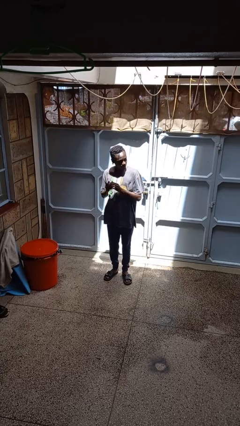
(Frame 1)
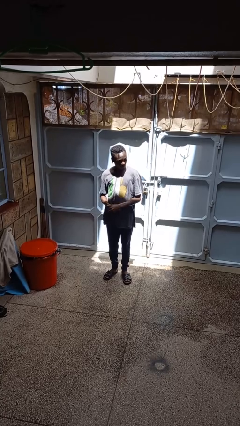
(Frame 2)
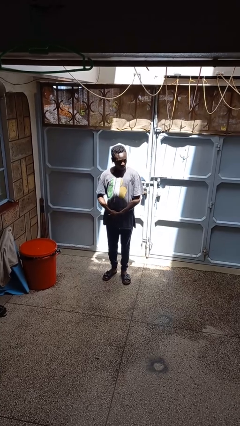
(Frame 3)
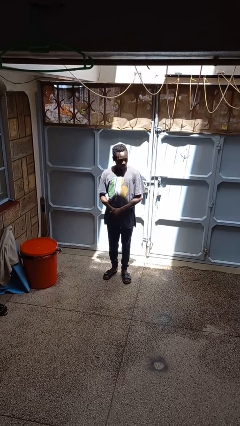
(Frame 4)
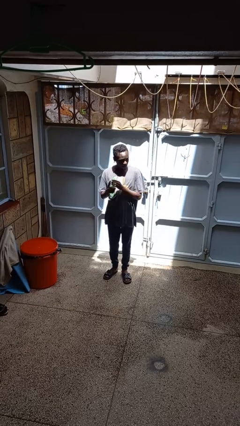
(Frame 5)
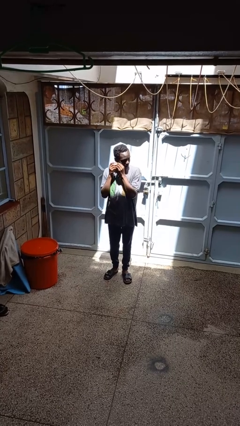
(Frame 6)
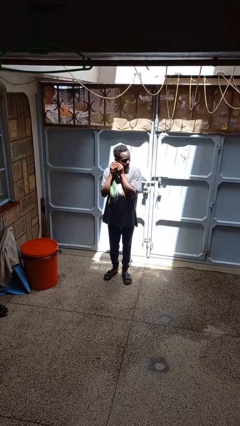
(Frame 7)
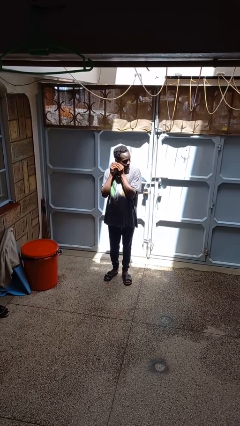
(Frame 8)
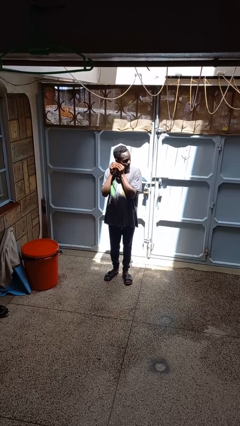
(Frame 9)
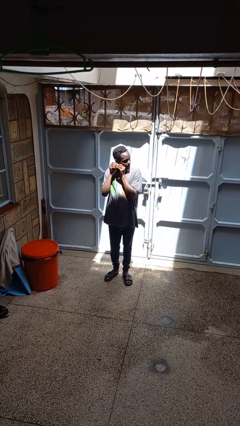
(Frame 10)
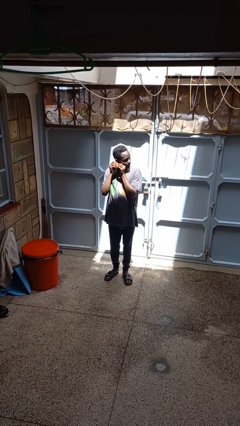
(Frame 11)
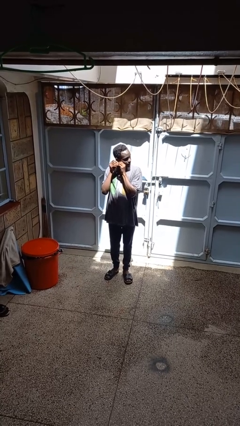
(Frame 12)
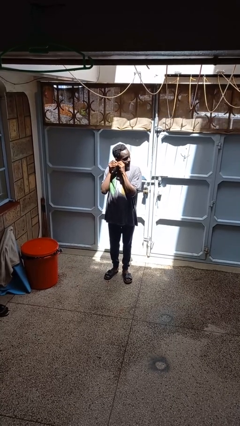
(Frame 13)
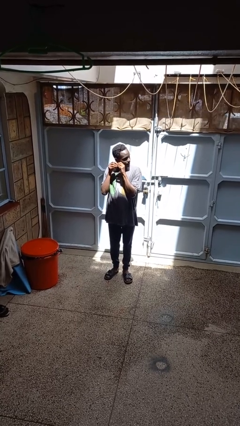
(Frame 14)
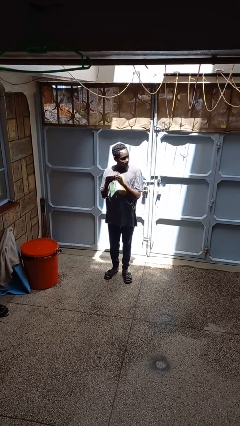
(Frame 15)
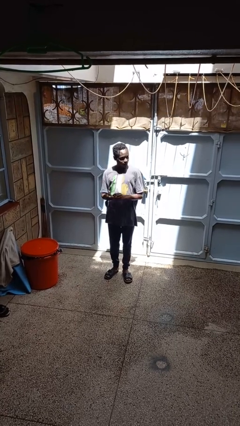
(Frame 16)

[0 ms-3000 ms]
person takes off earrings

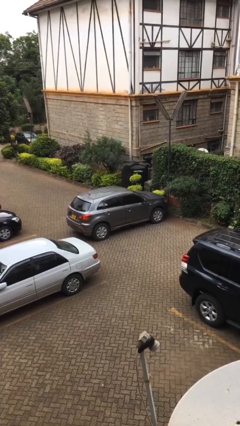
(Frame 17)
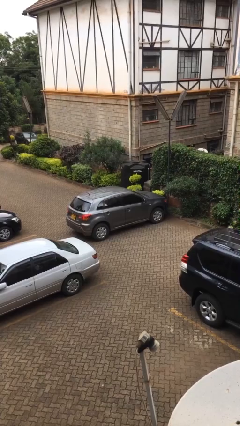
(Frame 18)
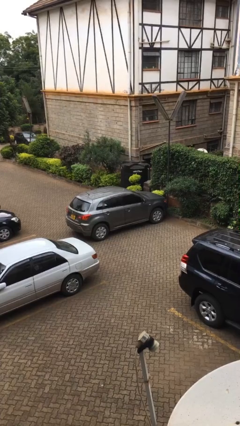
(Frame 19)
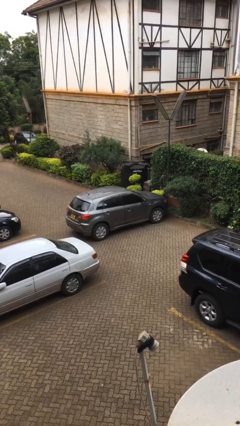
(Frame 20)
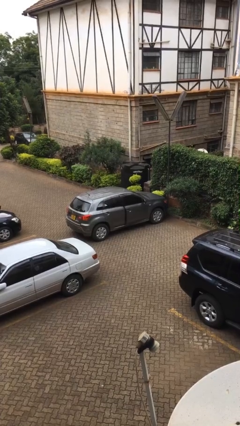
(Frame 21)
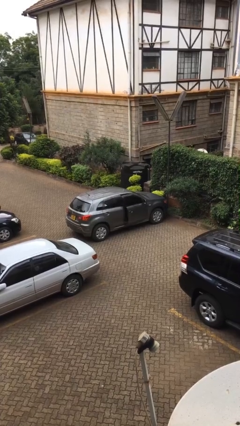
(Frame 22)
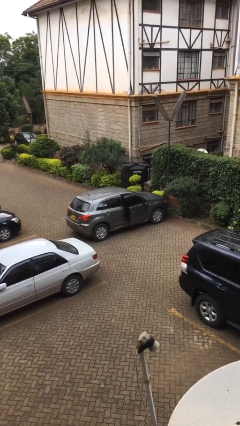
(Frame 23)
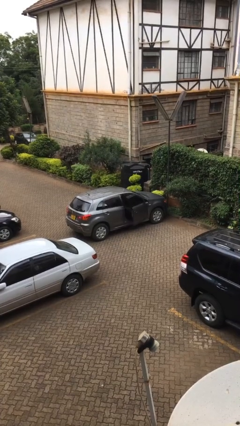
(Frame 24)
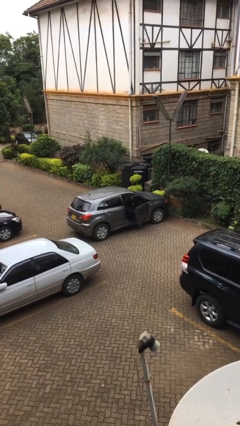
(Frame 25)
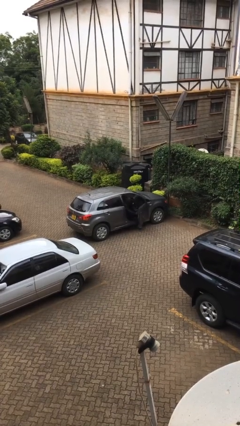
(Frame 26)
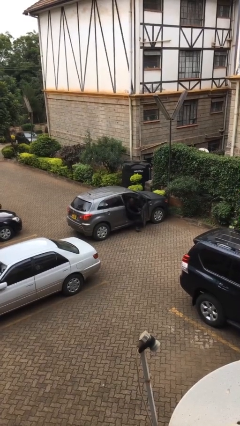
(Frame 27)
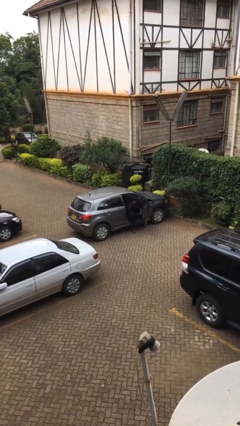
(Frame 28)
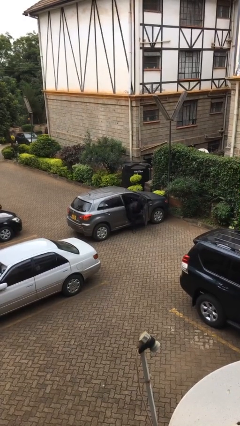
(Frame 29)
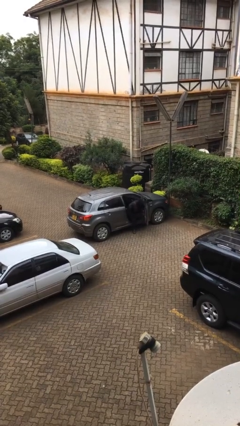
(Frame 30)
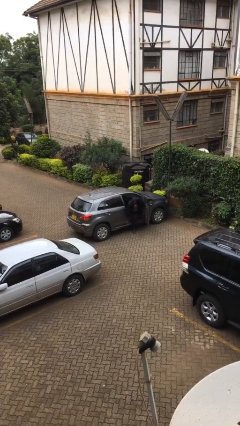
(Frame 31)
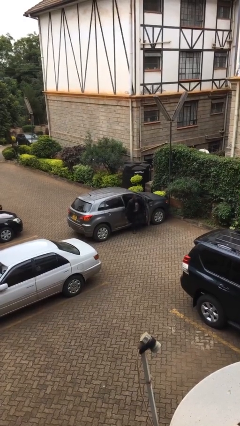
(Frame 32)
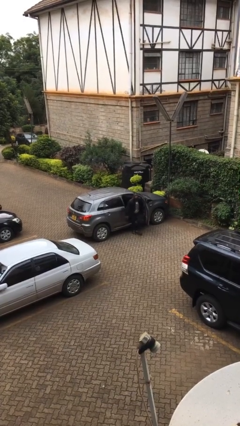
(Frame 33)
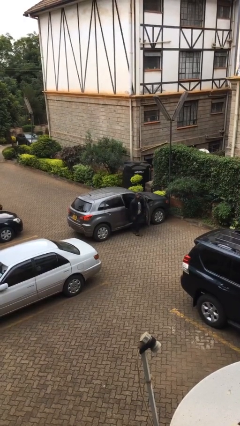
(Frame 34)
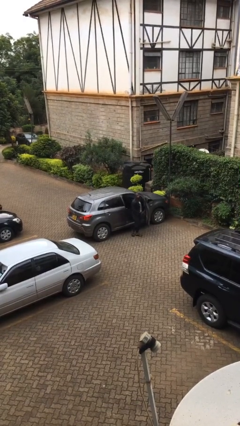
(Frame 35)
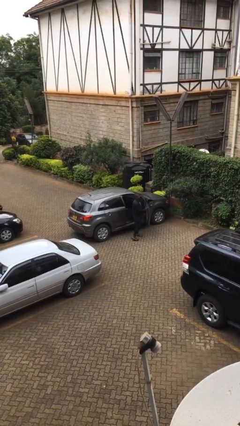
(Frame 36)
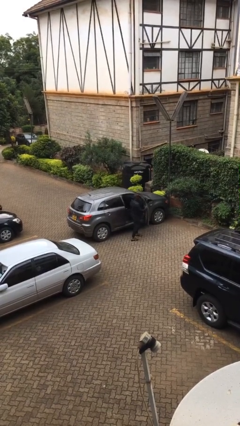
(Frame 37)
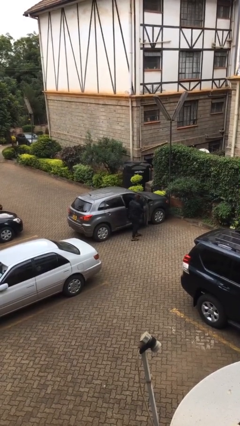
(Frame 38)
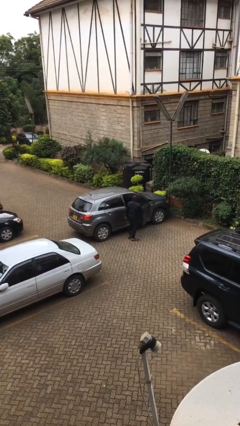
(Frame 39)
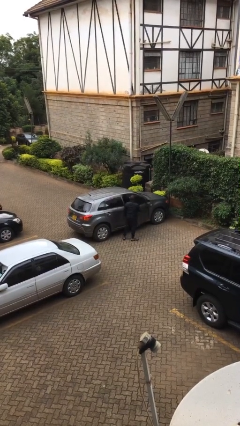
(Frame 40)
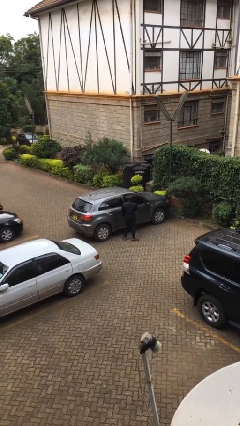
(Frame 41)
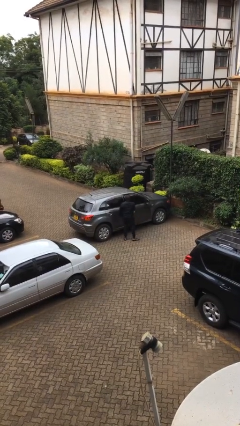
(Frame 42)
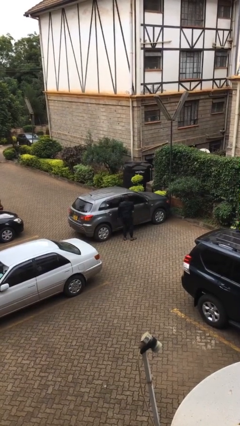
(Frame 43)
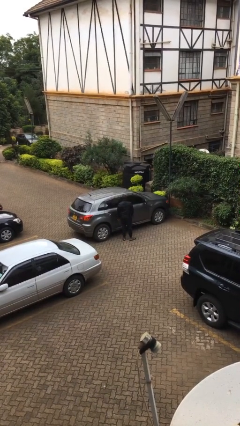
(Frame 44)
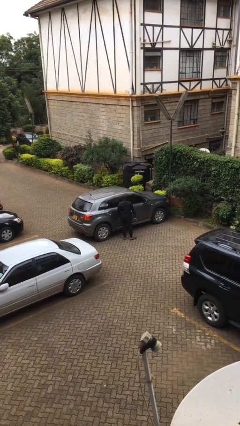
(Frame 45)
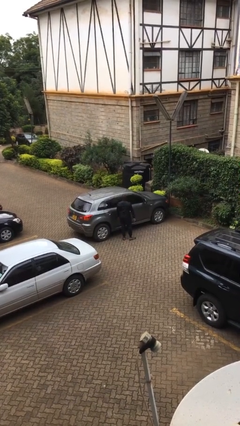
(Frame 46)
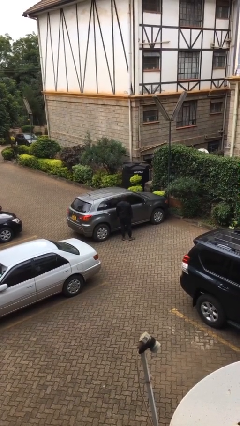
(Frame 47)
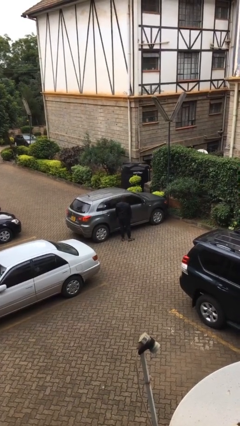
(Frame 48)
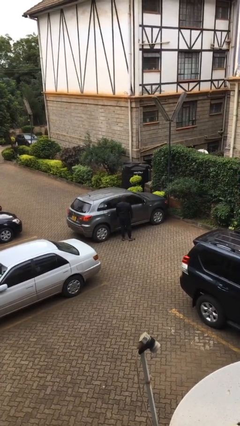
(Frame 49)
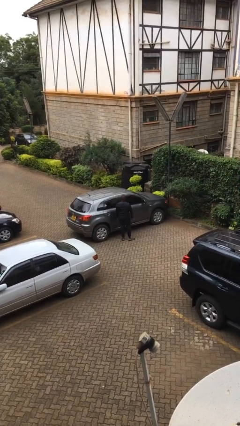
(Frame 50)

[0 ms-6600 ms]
car drops off person

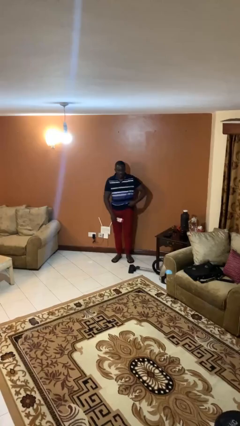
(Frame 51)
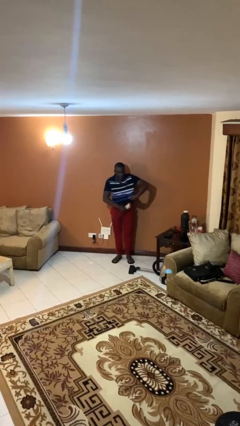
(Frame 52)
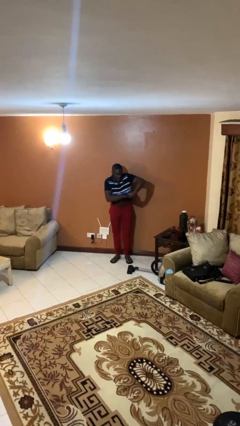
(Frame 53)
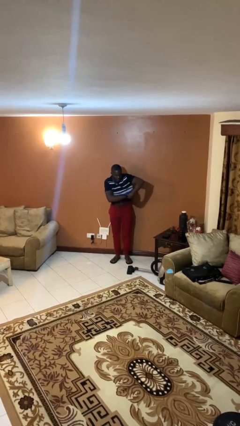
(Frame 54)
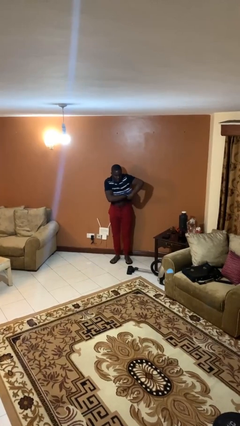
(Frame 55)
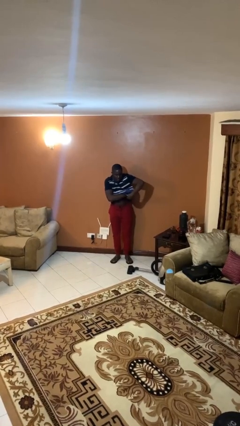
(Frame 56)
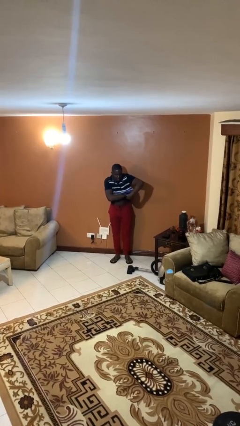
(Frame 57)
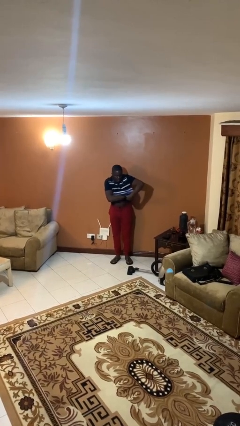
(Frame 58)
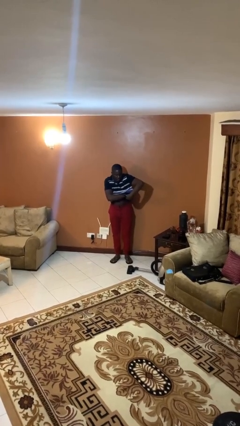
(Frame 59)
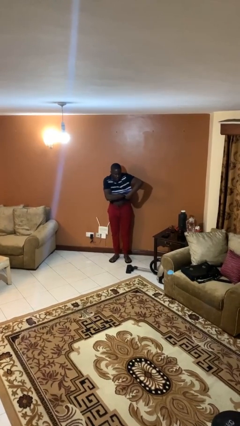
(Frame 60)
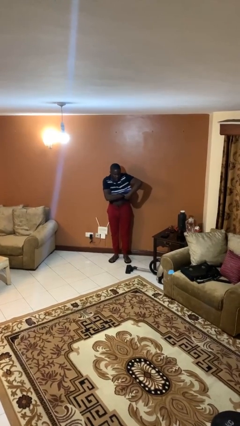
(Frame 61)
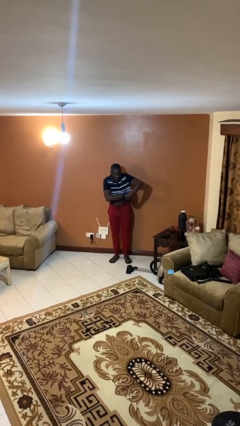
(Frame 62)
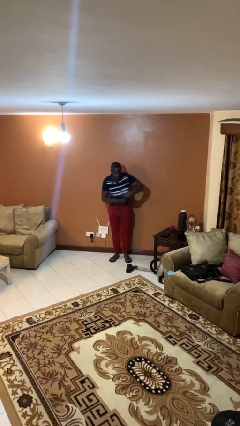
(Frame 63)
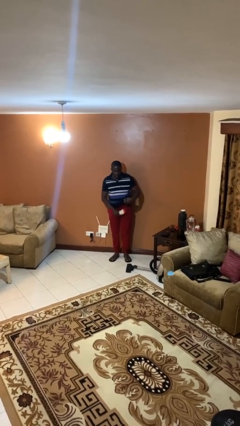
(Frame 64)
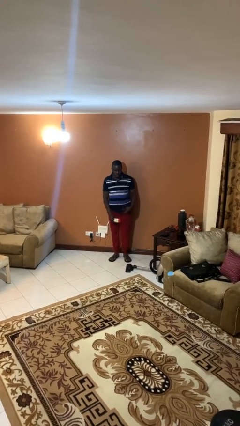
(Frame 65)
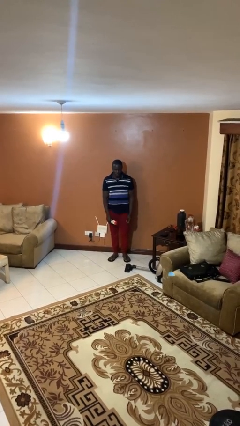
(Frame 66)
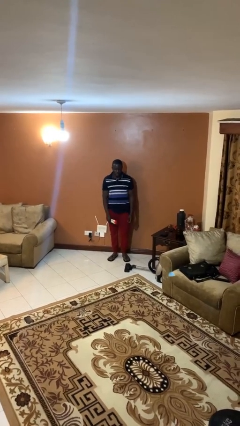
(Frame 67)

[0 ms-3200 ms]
person applies deodorant

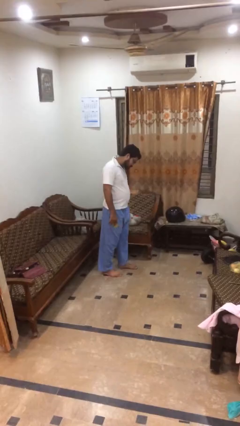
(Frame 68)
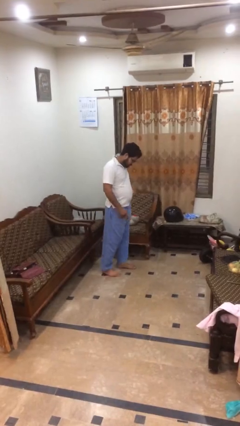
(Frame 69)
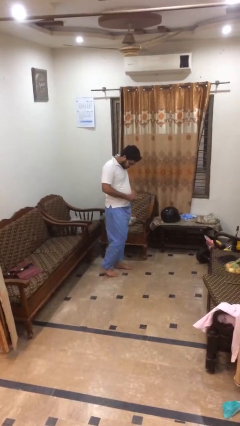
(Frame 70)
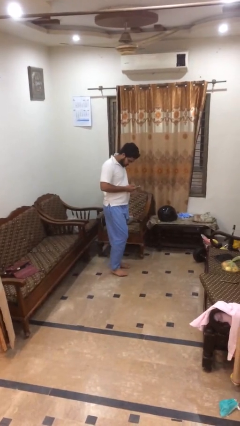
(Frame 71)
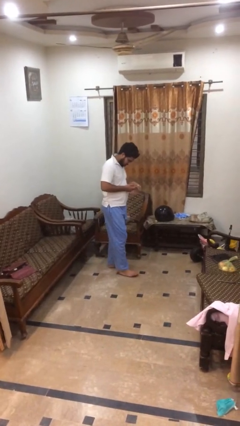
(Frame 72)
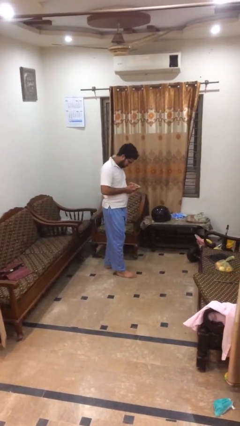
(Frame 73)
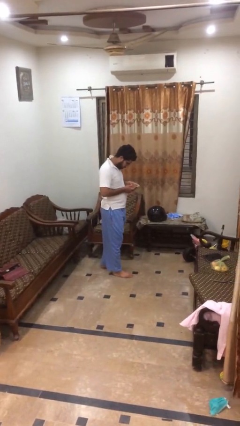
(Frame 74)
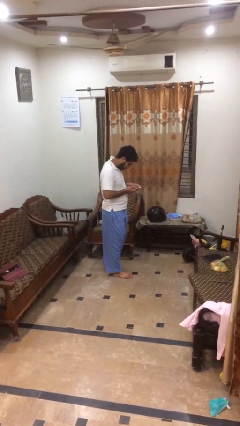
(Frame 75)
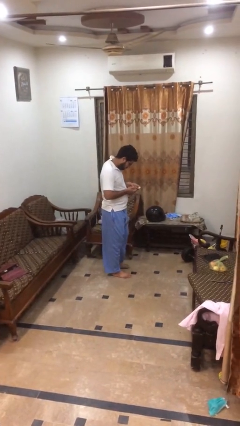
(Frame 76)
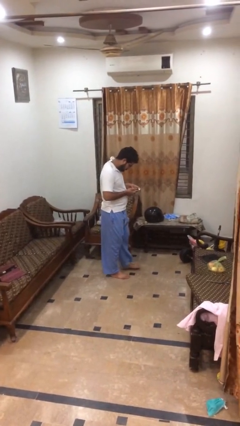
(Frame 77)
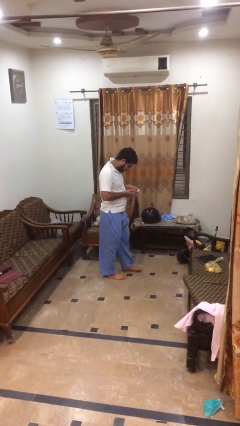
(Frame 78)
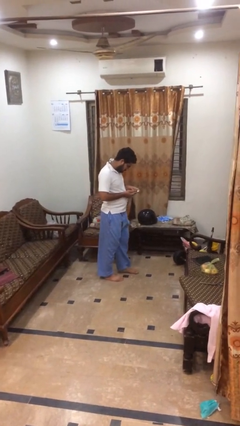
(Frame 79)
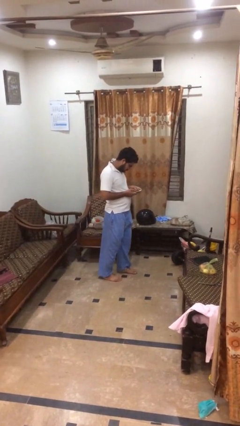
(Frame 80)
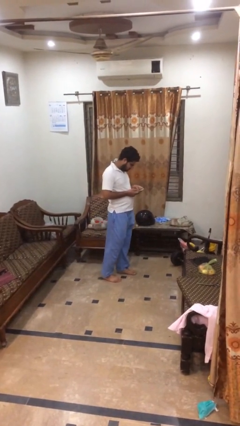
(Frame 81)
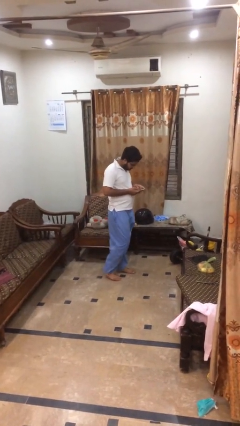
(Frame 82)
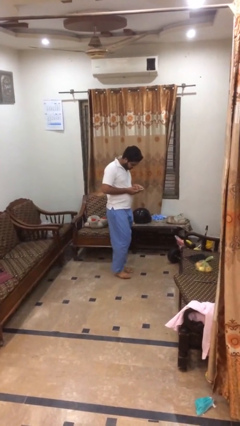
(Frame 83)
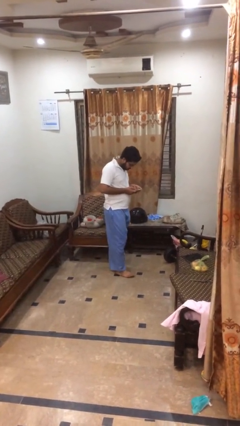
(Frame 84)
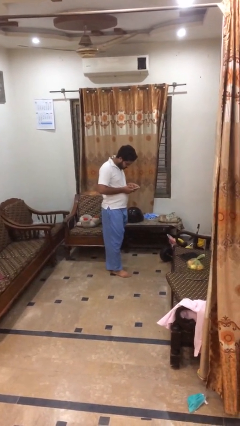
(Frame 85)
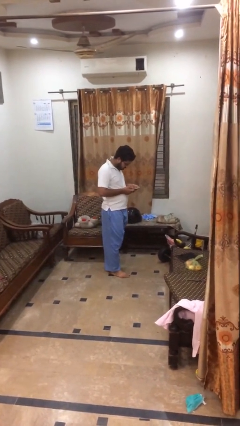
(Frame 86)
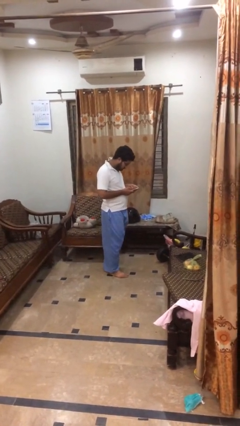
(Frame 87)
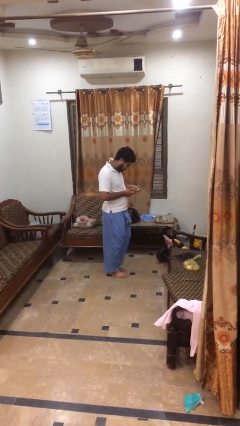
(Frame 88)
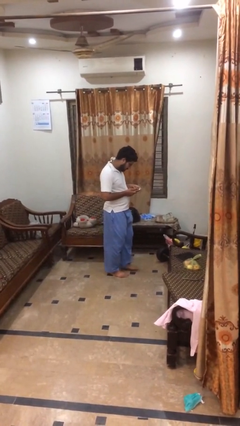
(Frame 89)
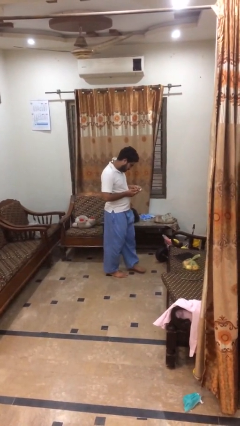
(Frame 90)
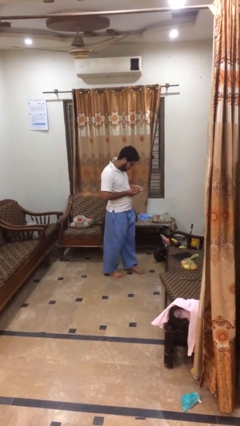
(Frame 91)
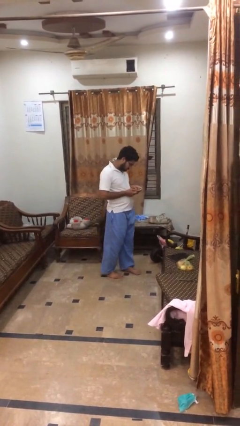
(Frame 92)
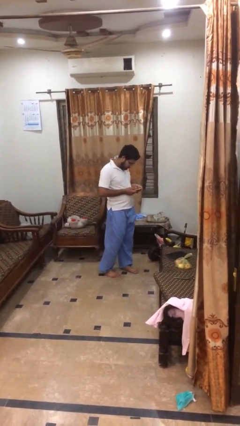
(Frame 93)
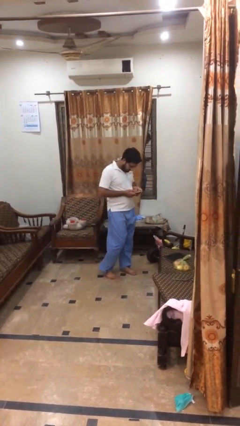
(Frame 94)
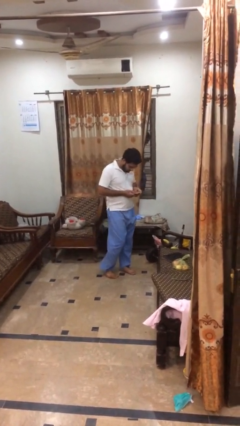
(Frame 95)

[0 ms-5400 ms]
person texts on phone
